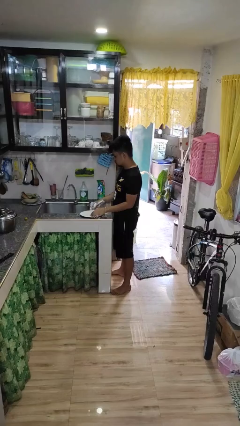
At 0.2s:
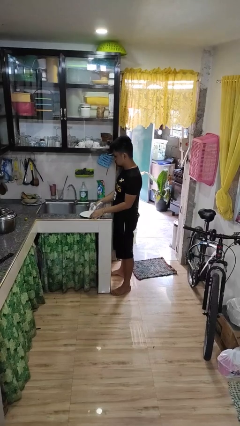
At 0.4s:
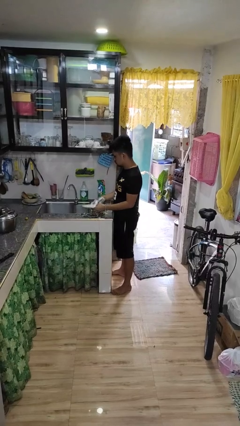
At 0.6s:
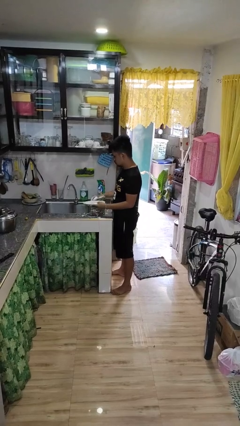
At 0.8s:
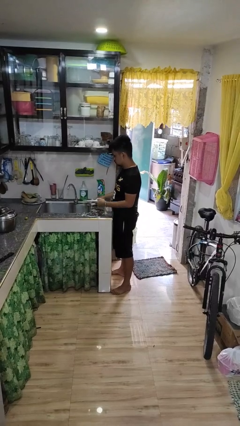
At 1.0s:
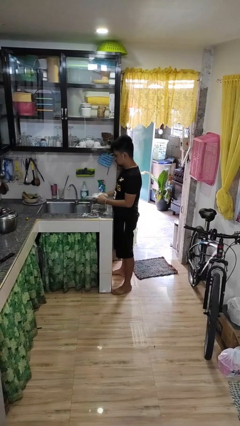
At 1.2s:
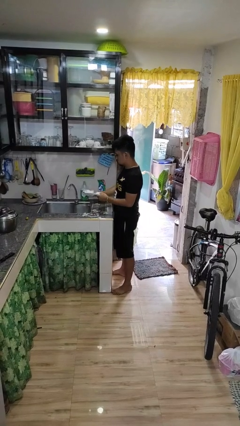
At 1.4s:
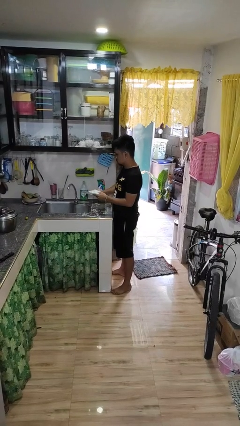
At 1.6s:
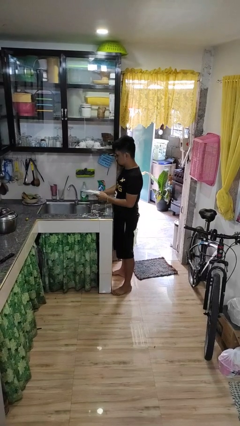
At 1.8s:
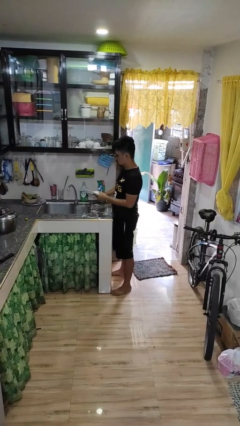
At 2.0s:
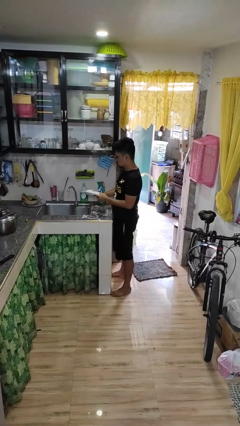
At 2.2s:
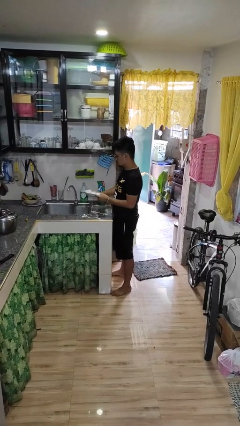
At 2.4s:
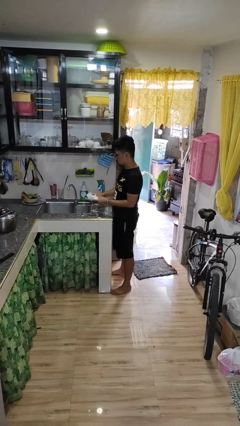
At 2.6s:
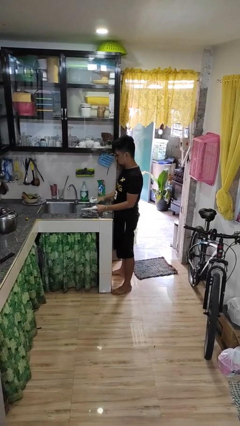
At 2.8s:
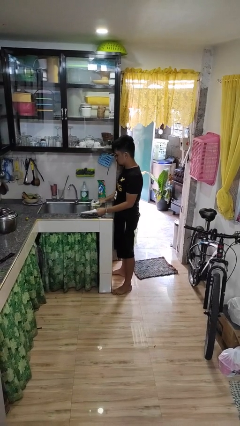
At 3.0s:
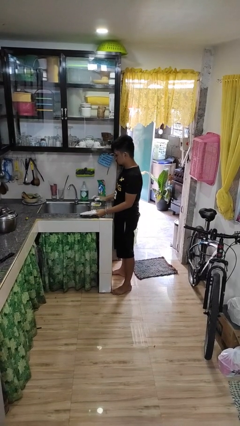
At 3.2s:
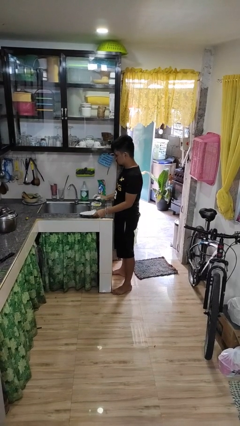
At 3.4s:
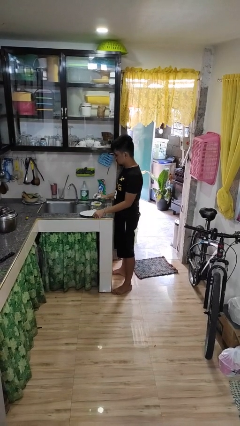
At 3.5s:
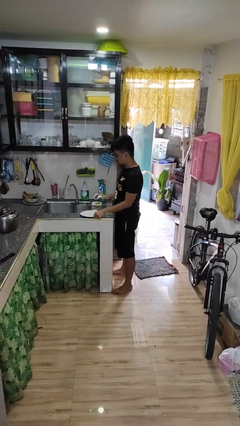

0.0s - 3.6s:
person washes dish

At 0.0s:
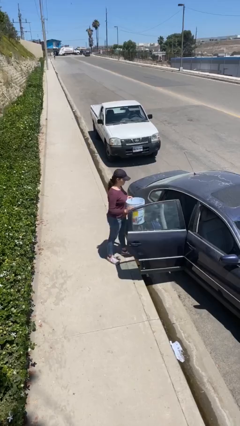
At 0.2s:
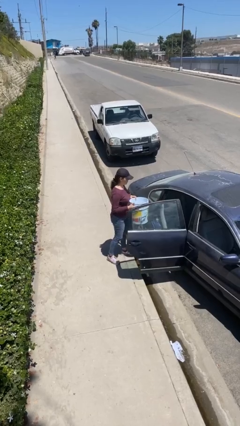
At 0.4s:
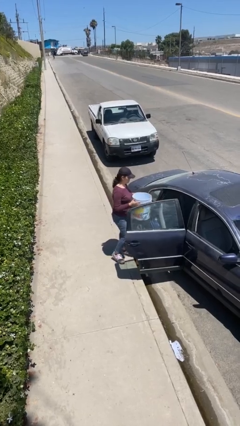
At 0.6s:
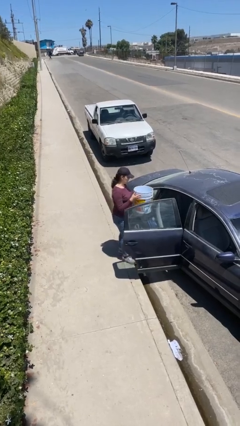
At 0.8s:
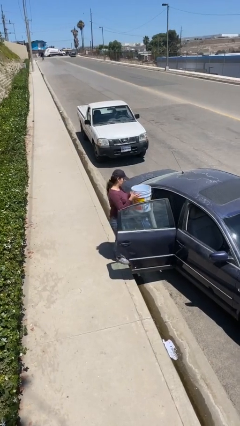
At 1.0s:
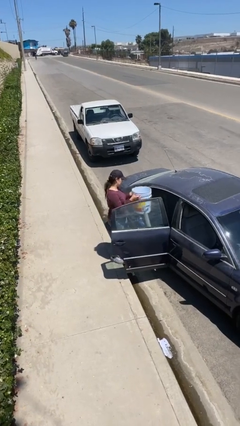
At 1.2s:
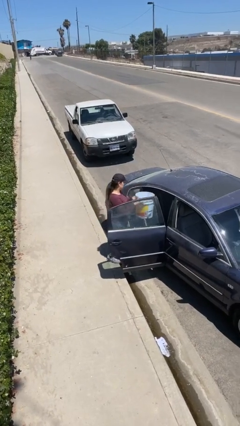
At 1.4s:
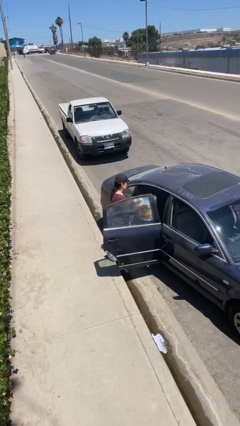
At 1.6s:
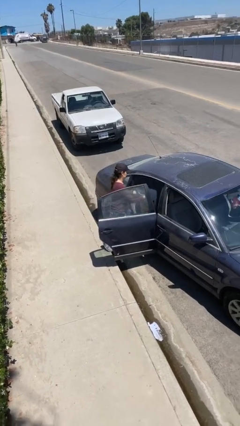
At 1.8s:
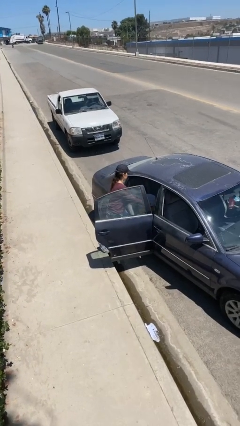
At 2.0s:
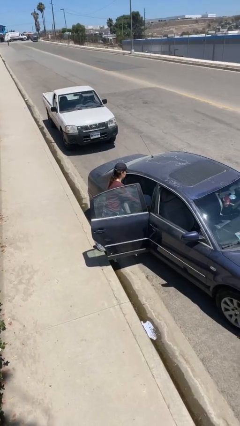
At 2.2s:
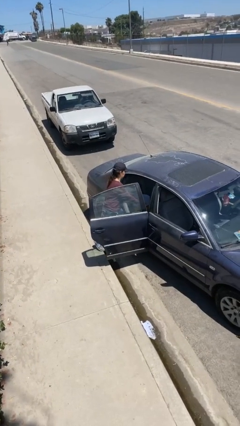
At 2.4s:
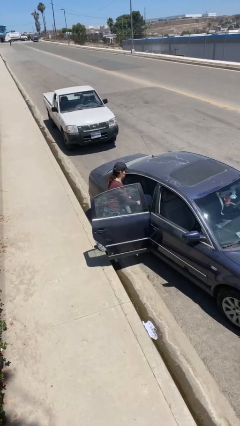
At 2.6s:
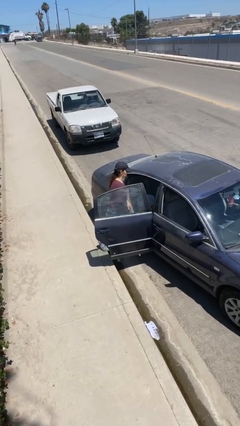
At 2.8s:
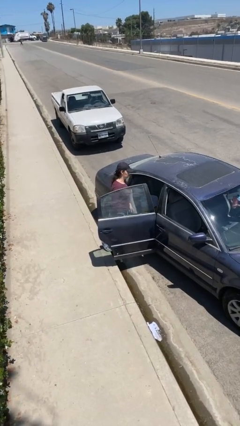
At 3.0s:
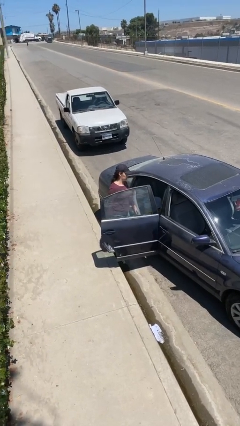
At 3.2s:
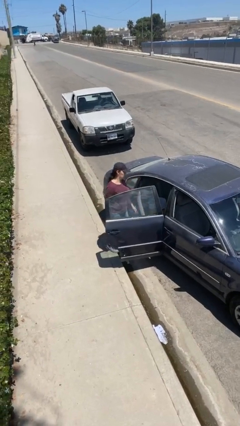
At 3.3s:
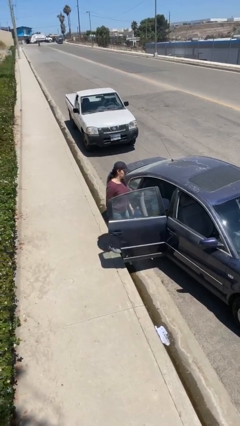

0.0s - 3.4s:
person loads car

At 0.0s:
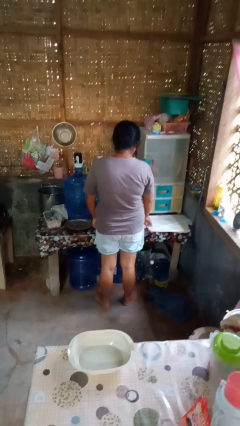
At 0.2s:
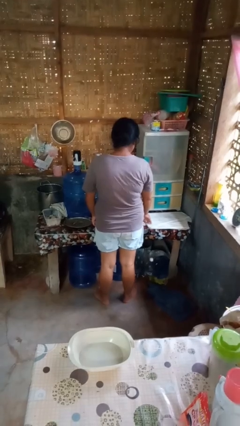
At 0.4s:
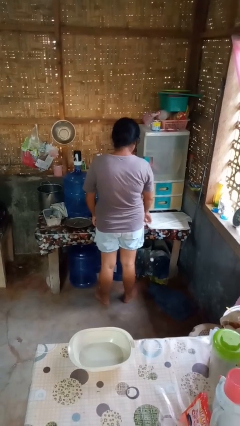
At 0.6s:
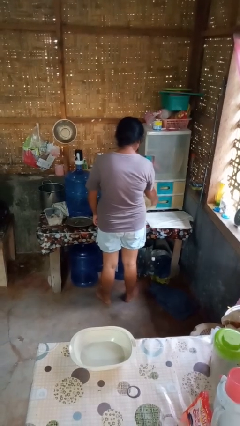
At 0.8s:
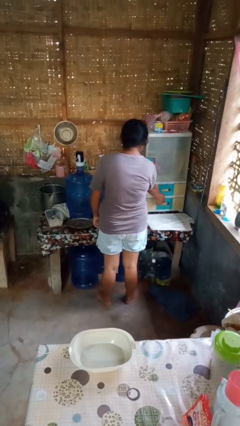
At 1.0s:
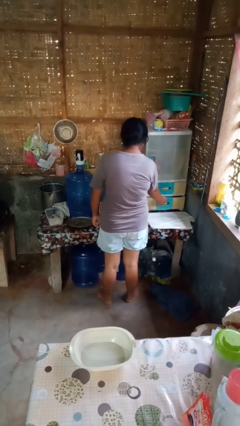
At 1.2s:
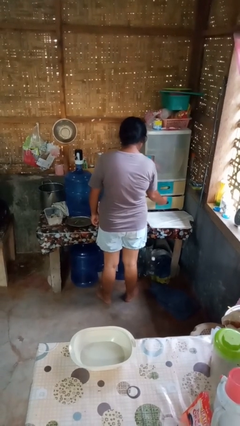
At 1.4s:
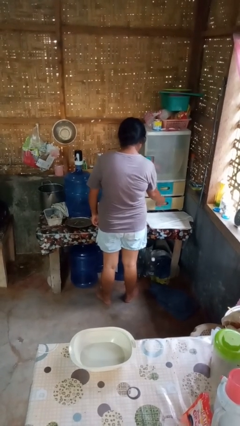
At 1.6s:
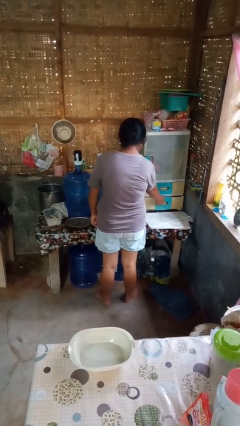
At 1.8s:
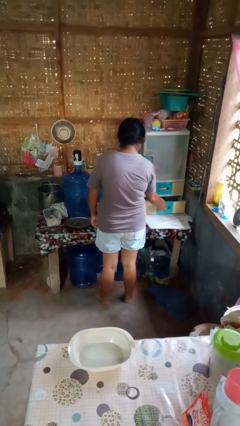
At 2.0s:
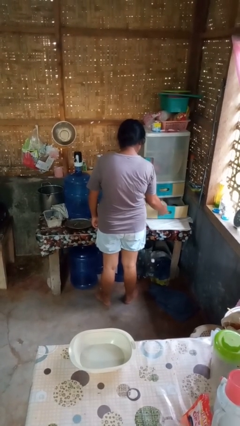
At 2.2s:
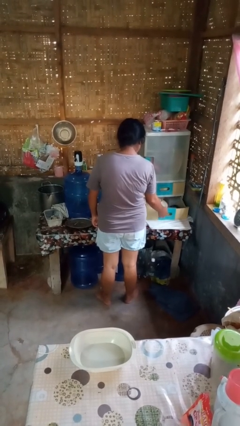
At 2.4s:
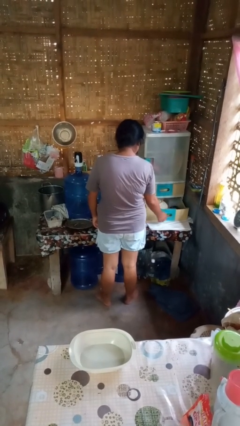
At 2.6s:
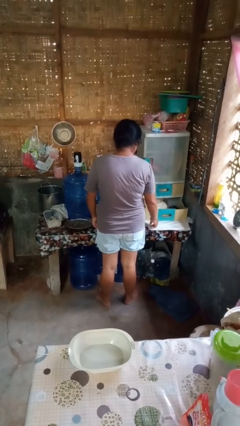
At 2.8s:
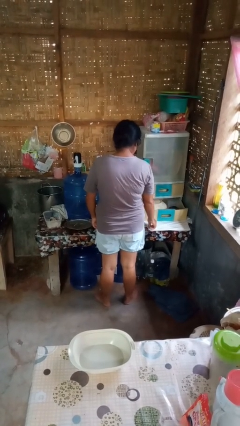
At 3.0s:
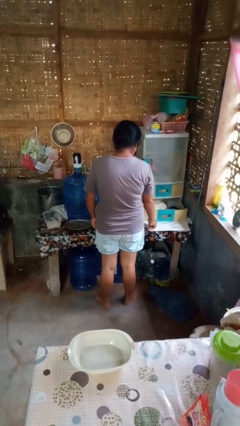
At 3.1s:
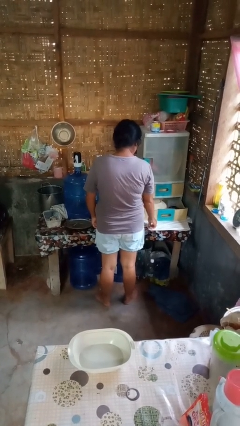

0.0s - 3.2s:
person opens kitchen drawer

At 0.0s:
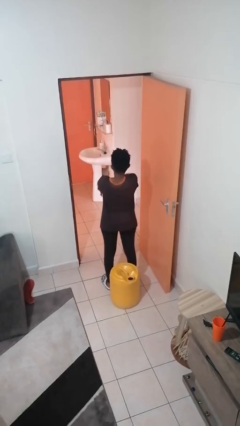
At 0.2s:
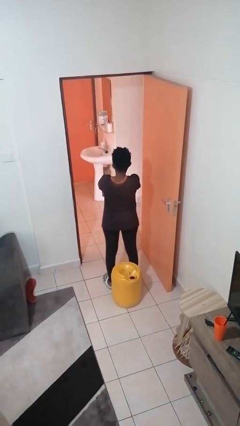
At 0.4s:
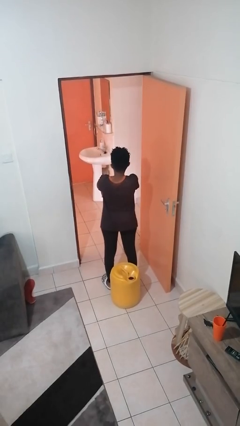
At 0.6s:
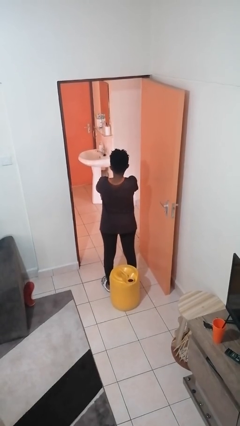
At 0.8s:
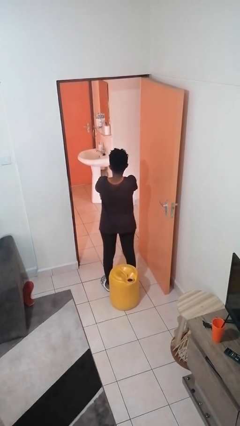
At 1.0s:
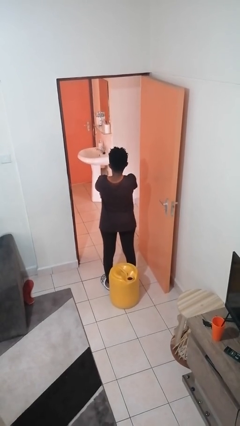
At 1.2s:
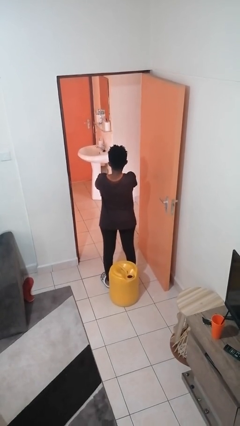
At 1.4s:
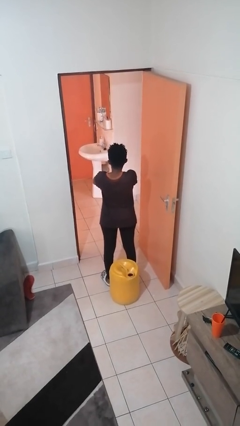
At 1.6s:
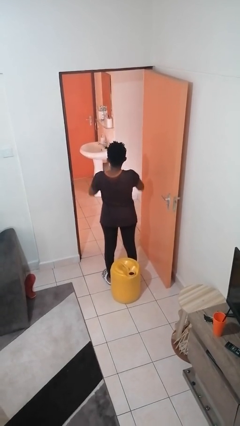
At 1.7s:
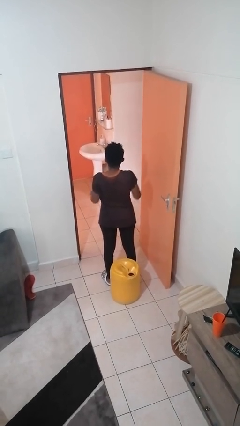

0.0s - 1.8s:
person crosses arms

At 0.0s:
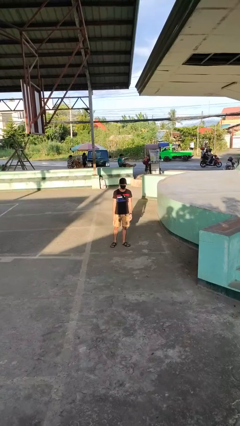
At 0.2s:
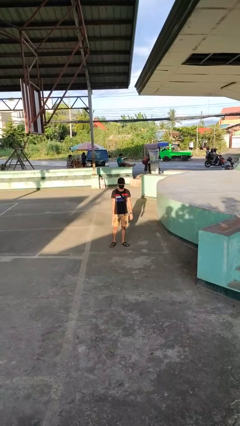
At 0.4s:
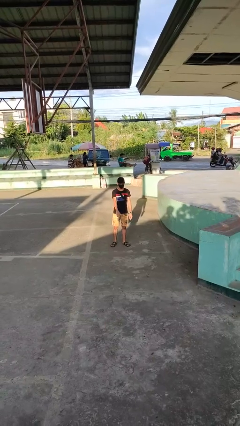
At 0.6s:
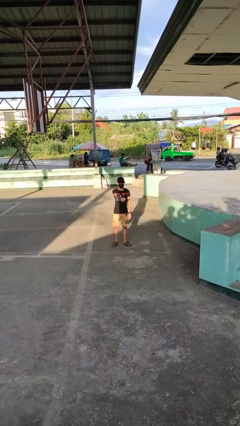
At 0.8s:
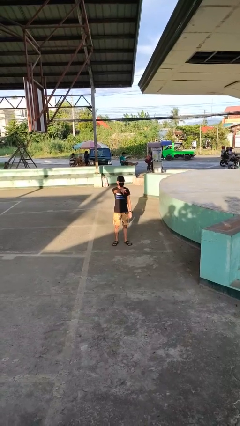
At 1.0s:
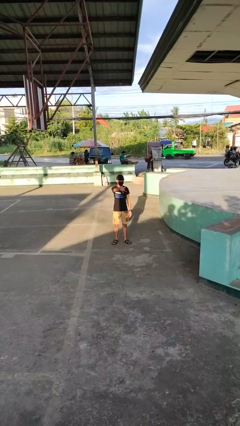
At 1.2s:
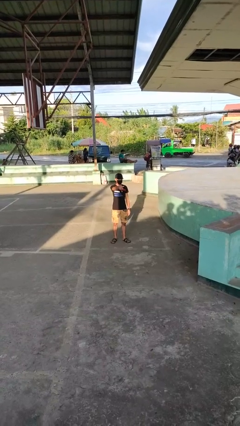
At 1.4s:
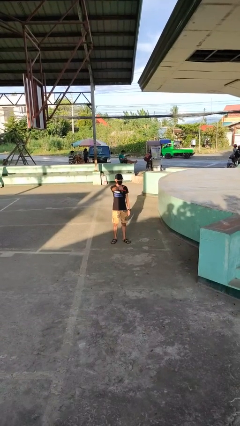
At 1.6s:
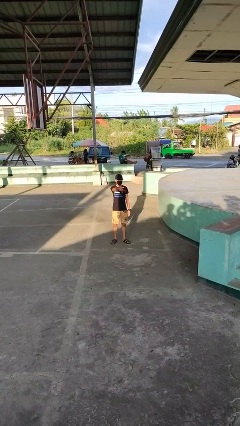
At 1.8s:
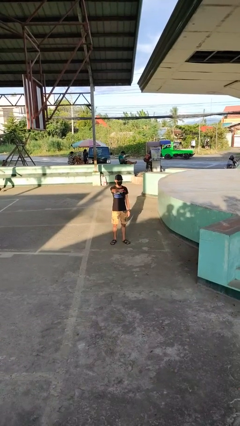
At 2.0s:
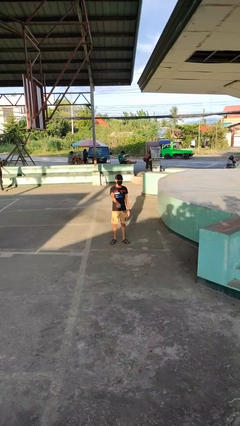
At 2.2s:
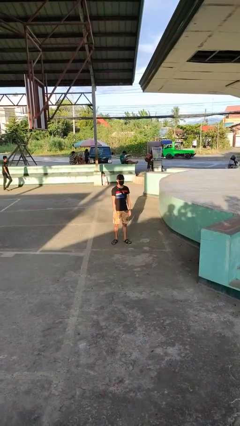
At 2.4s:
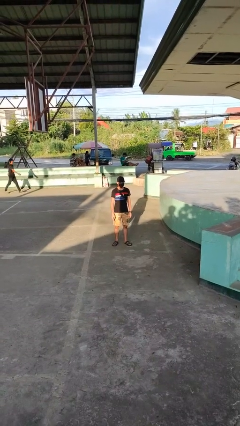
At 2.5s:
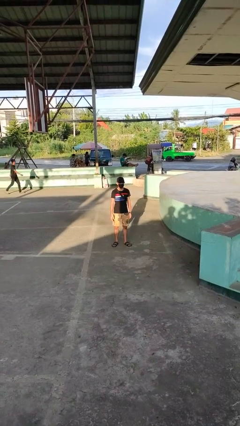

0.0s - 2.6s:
person points at person

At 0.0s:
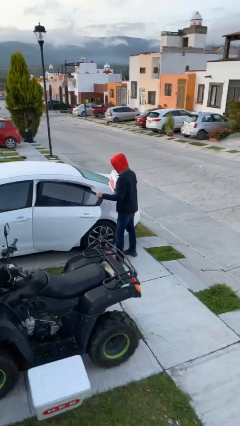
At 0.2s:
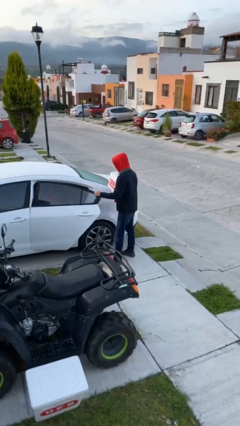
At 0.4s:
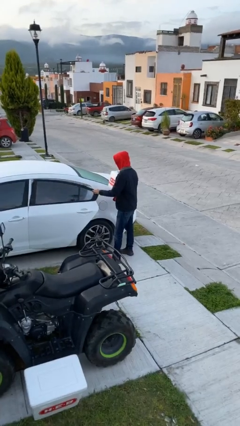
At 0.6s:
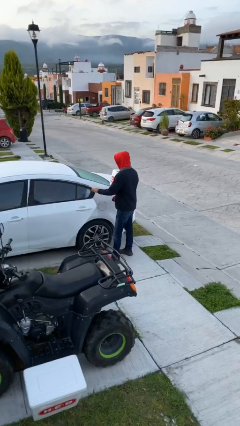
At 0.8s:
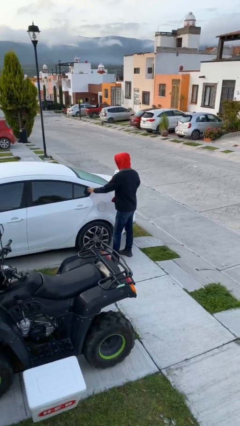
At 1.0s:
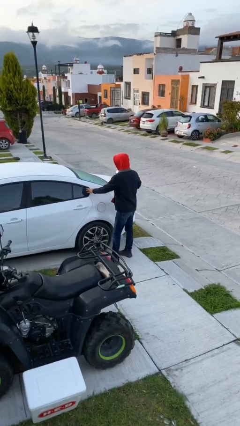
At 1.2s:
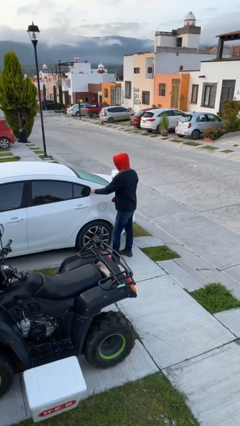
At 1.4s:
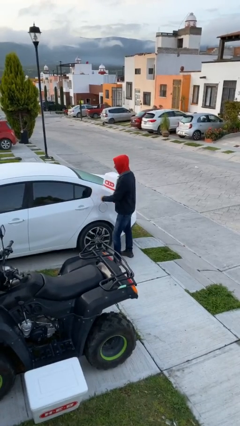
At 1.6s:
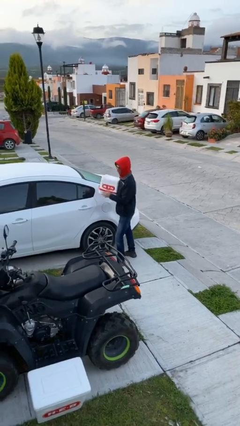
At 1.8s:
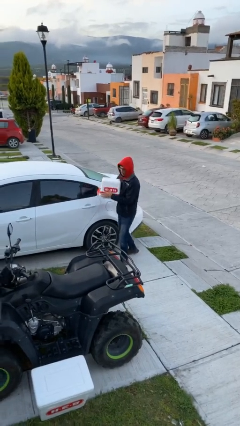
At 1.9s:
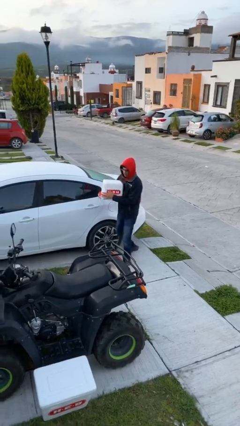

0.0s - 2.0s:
person closes car door

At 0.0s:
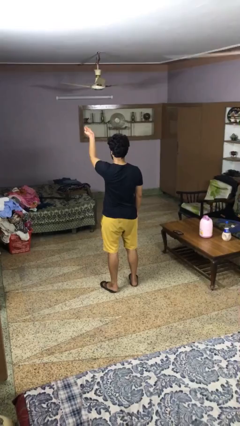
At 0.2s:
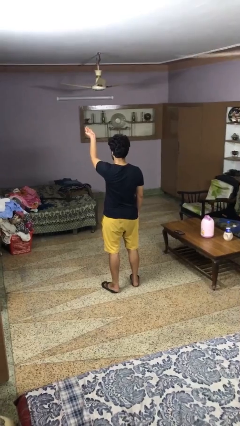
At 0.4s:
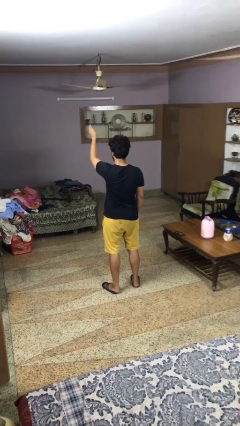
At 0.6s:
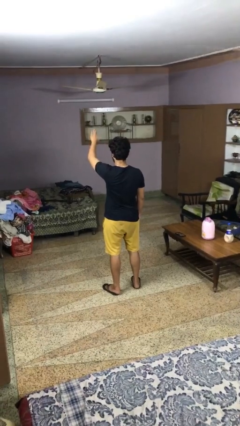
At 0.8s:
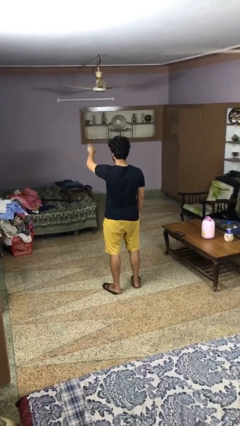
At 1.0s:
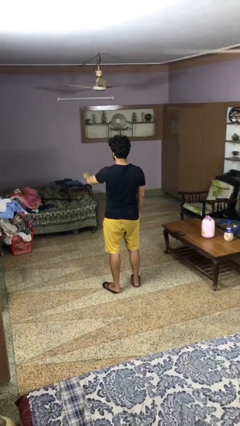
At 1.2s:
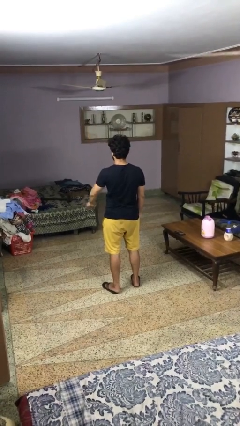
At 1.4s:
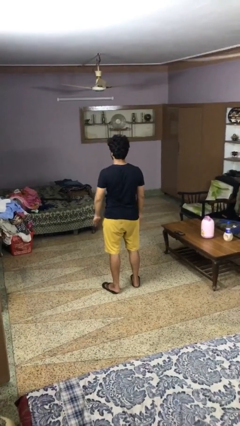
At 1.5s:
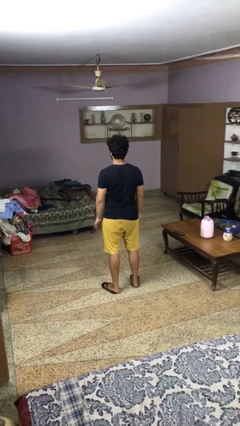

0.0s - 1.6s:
person gestures swipe down
